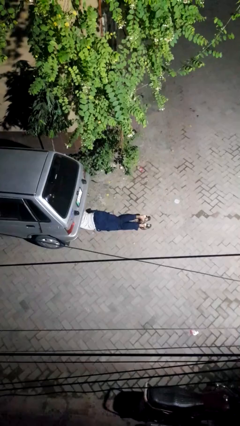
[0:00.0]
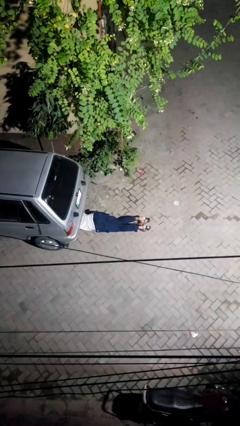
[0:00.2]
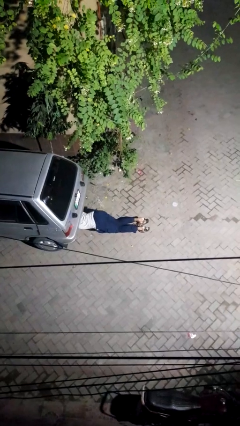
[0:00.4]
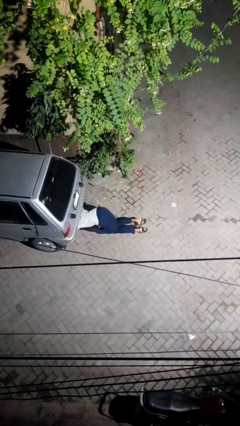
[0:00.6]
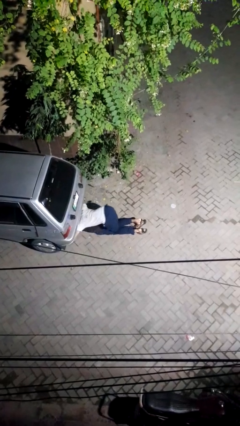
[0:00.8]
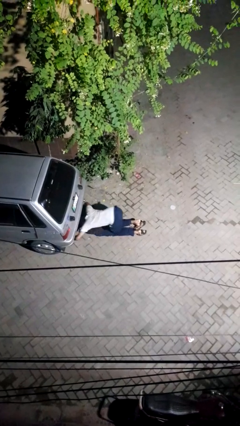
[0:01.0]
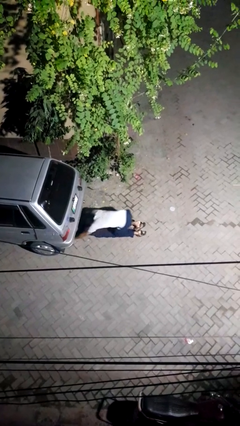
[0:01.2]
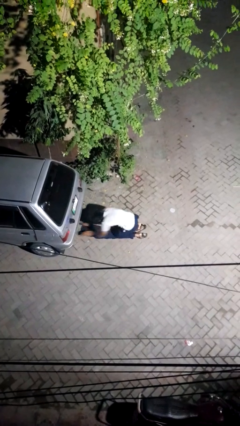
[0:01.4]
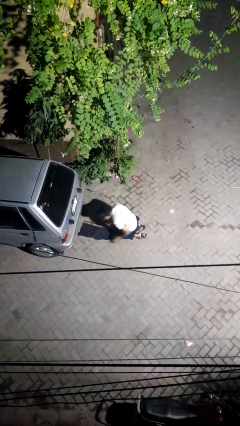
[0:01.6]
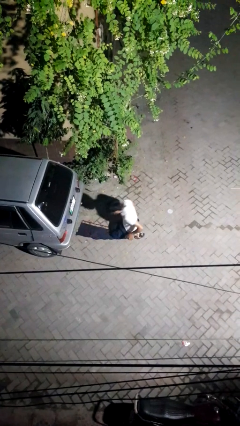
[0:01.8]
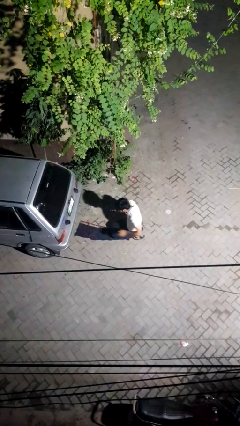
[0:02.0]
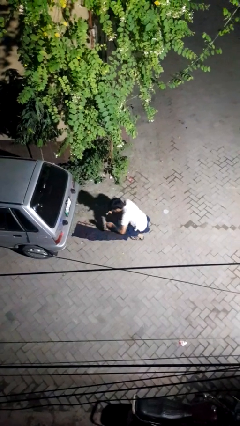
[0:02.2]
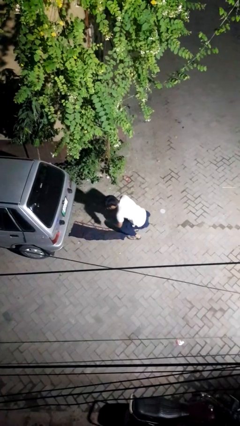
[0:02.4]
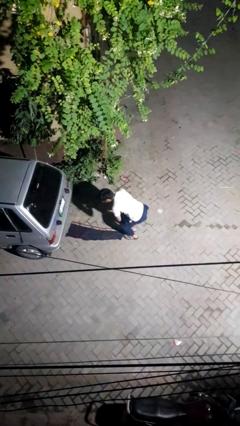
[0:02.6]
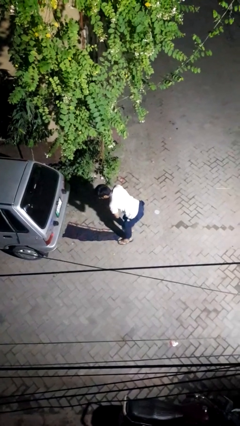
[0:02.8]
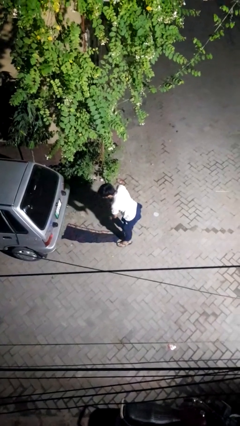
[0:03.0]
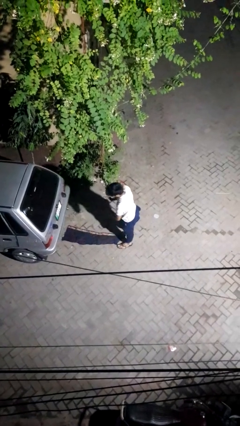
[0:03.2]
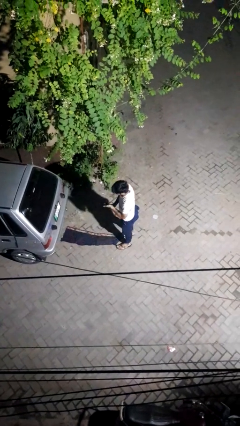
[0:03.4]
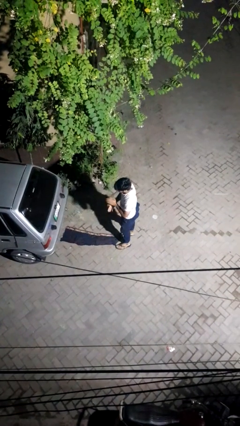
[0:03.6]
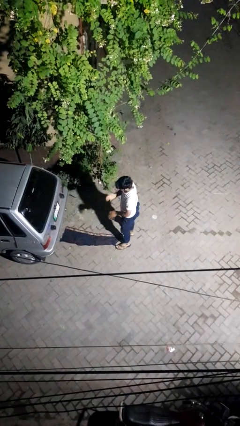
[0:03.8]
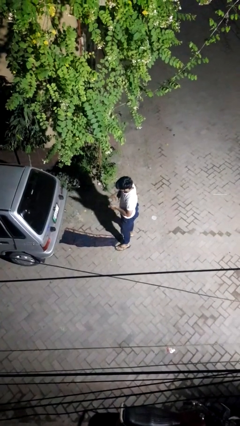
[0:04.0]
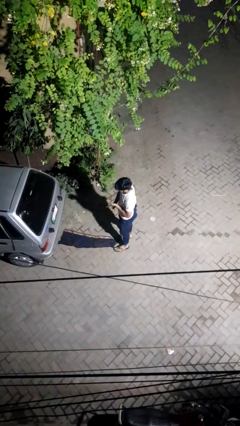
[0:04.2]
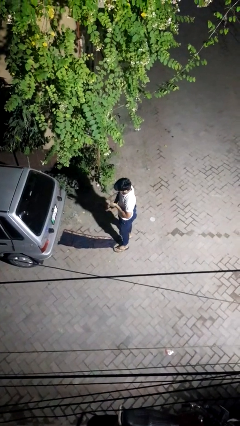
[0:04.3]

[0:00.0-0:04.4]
person crawls out from under vehicle

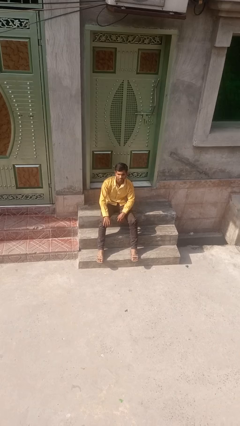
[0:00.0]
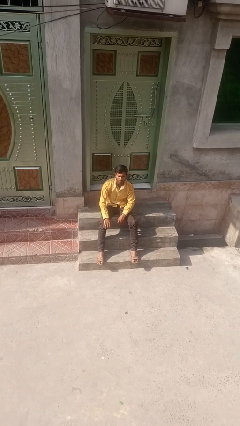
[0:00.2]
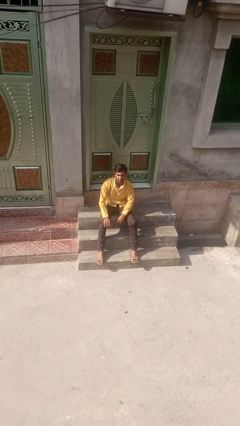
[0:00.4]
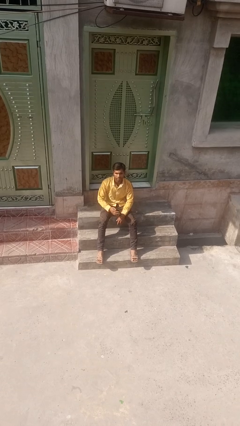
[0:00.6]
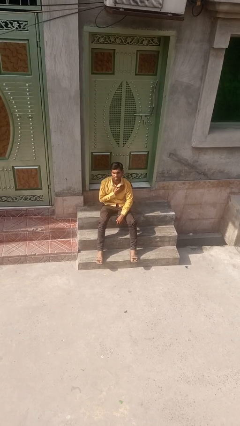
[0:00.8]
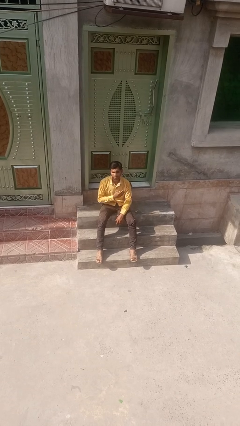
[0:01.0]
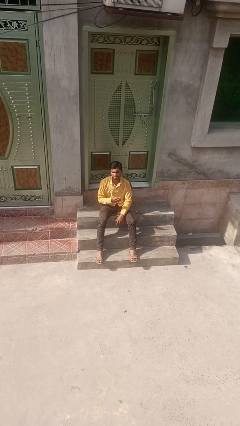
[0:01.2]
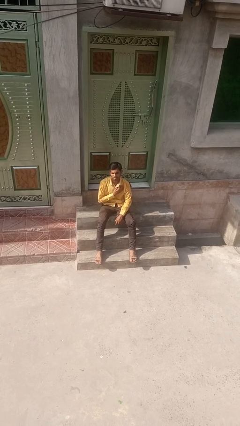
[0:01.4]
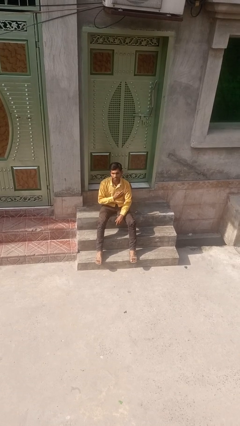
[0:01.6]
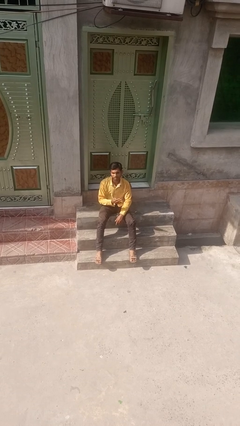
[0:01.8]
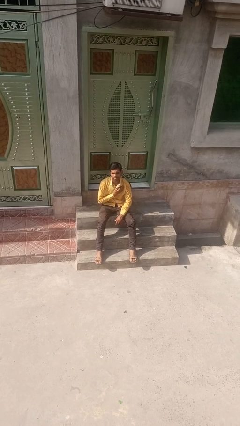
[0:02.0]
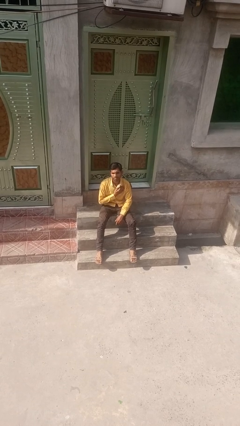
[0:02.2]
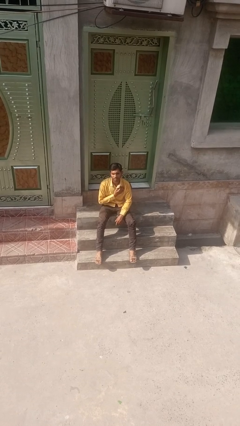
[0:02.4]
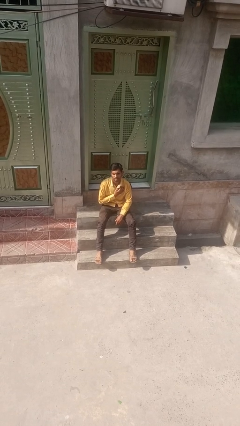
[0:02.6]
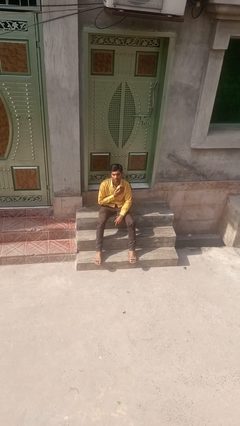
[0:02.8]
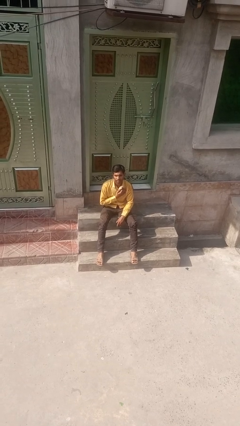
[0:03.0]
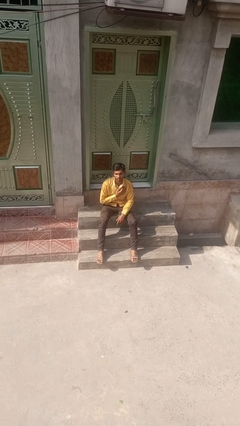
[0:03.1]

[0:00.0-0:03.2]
person drums on chest

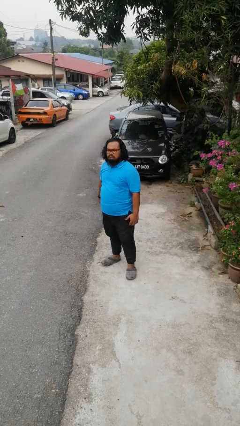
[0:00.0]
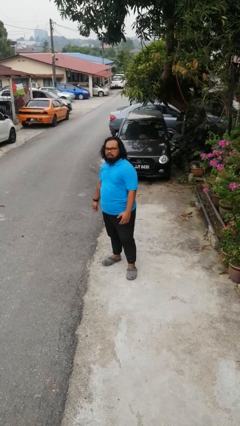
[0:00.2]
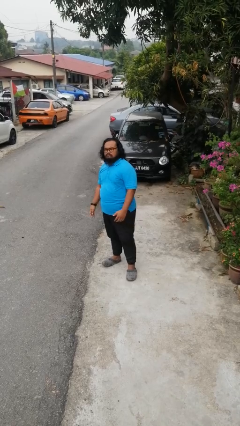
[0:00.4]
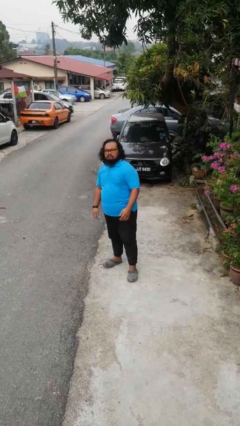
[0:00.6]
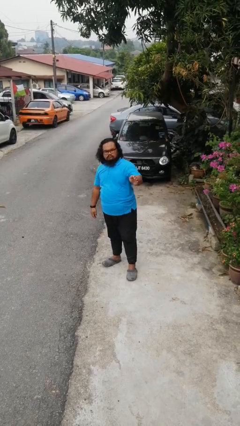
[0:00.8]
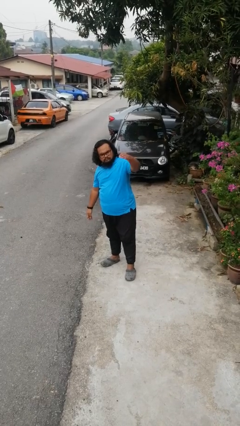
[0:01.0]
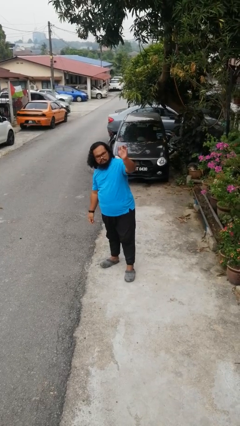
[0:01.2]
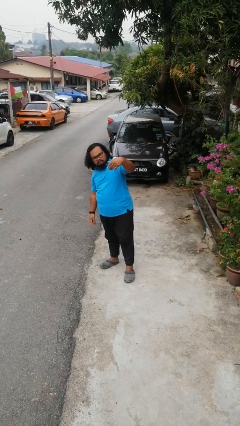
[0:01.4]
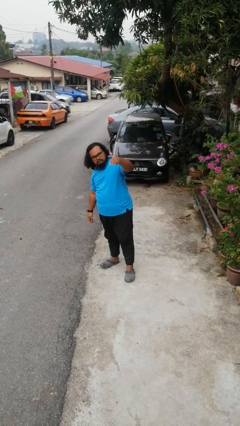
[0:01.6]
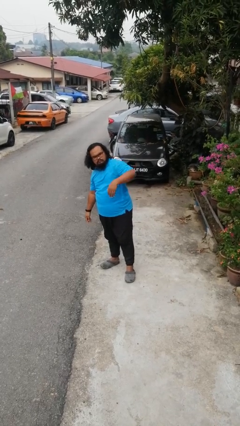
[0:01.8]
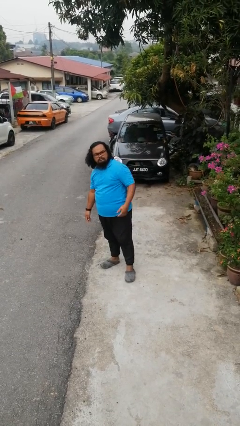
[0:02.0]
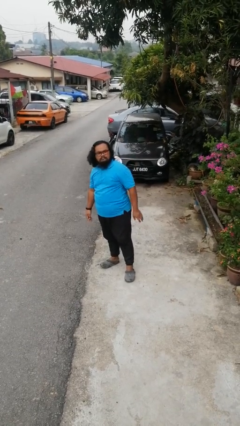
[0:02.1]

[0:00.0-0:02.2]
person gestures come here

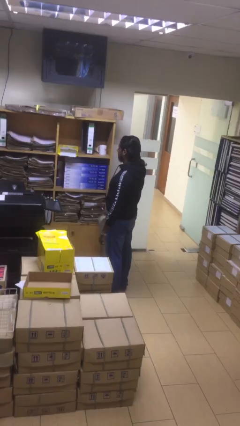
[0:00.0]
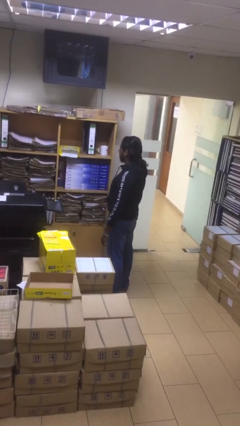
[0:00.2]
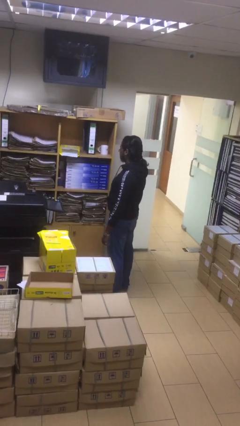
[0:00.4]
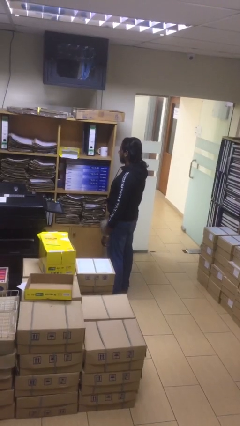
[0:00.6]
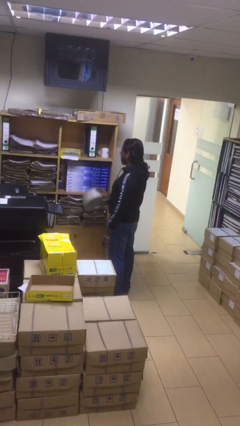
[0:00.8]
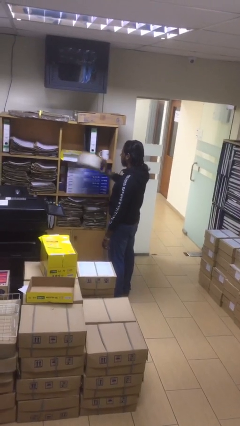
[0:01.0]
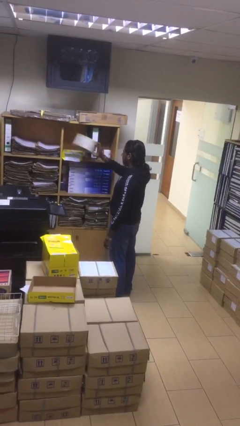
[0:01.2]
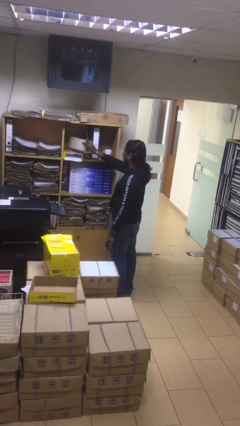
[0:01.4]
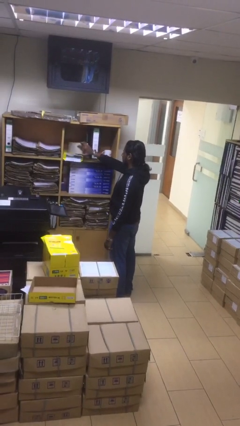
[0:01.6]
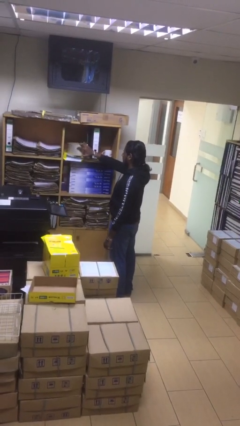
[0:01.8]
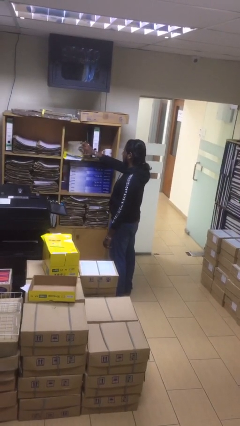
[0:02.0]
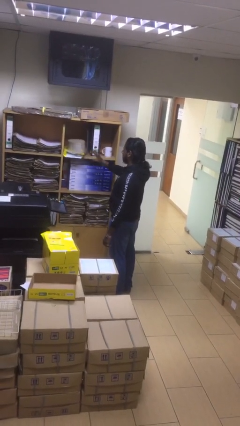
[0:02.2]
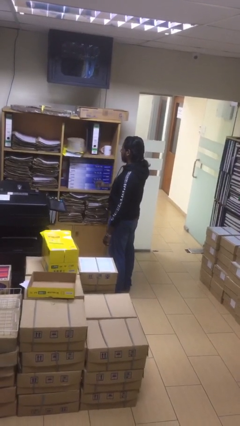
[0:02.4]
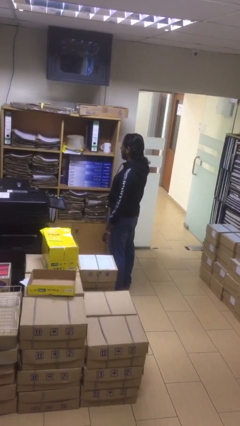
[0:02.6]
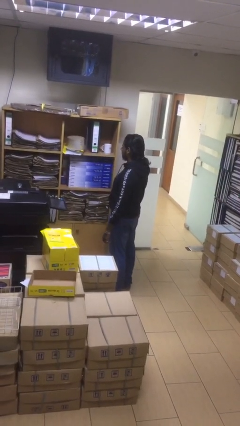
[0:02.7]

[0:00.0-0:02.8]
person puts down object into cabinet

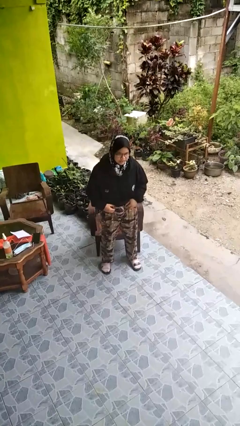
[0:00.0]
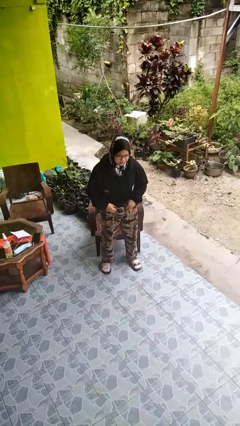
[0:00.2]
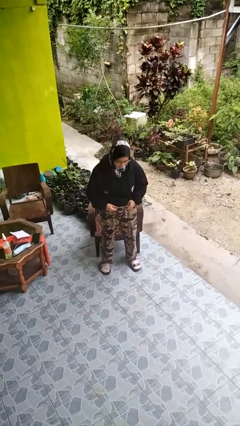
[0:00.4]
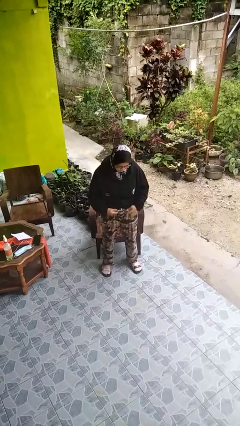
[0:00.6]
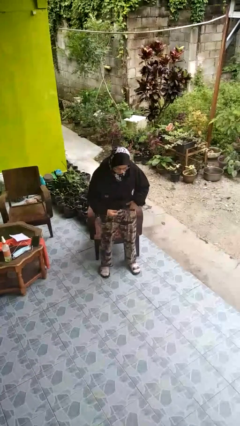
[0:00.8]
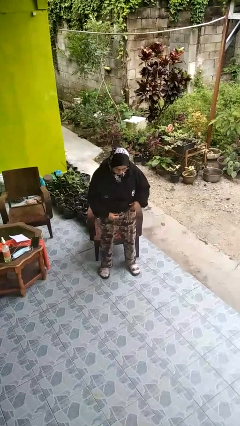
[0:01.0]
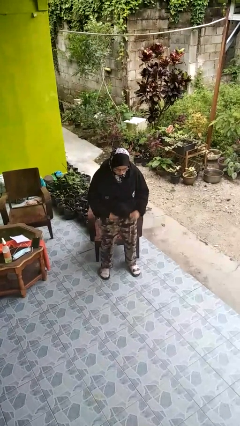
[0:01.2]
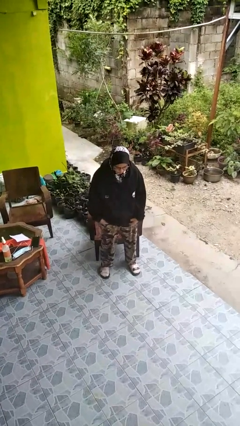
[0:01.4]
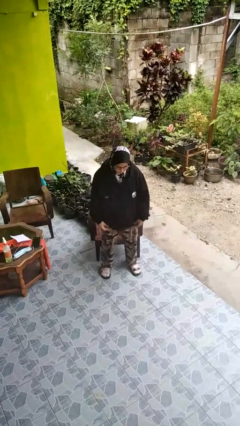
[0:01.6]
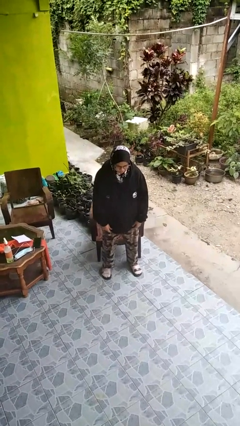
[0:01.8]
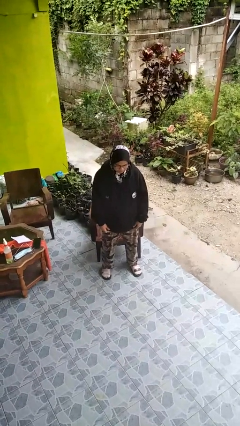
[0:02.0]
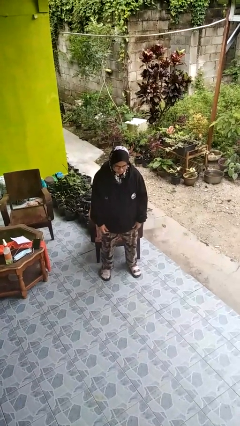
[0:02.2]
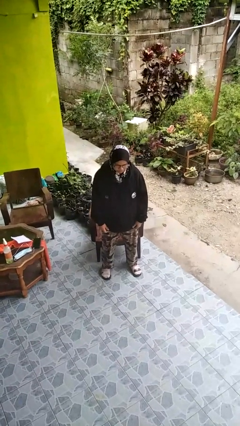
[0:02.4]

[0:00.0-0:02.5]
person untucks shirt

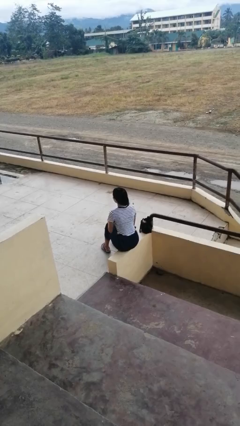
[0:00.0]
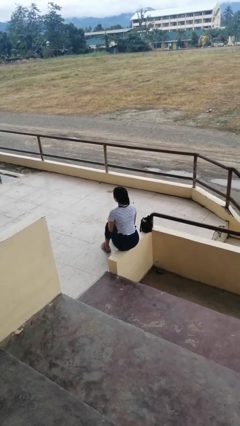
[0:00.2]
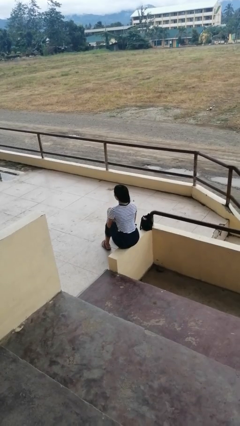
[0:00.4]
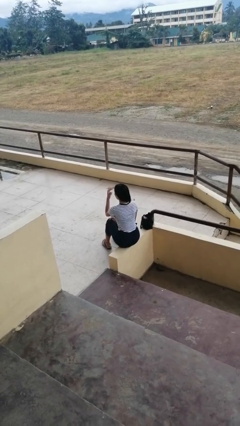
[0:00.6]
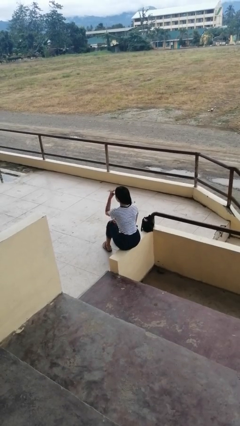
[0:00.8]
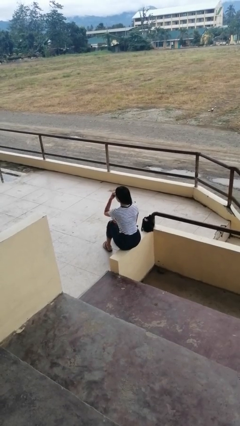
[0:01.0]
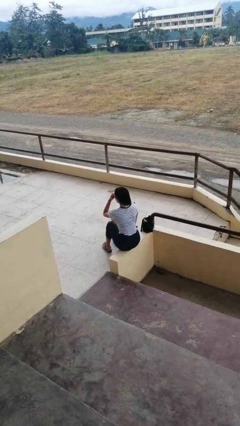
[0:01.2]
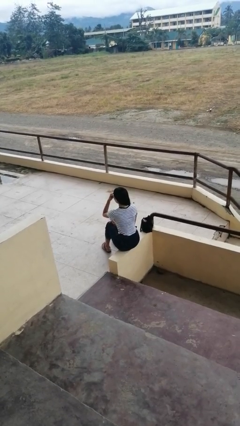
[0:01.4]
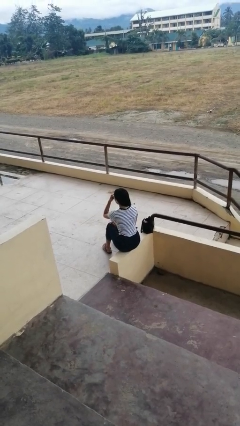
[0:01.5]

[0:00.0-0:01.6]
person gestures watch closely

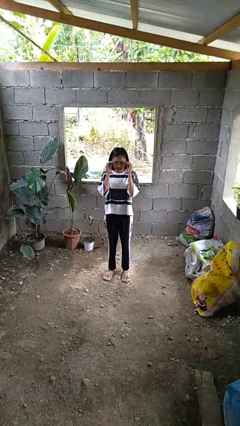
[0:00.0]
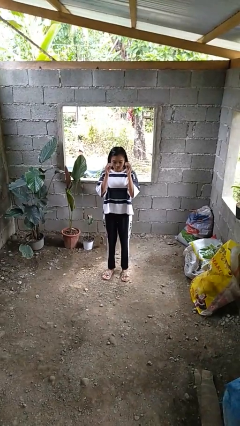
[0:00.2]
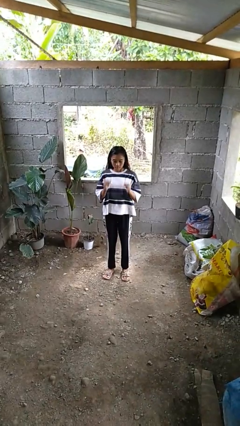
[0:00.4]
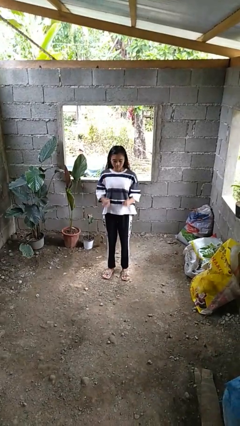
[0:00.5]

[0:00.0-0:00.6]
person takes off glasses

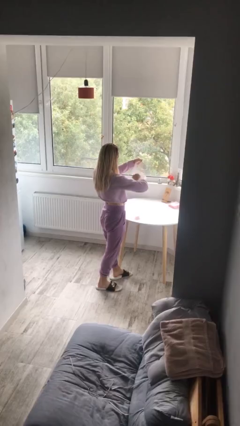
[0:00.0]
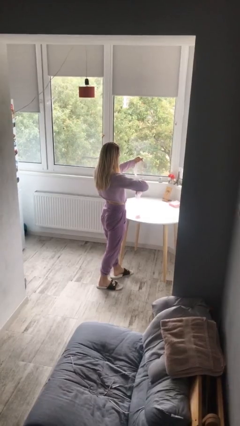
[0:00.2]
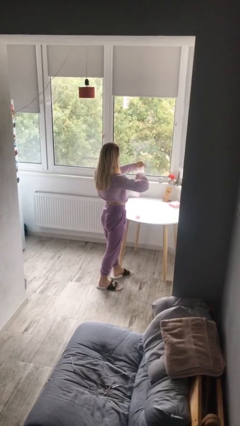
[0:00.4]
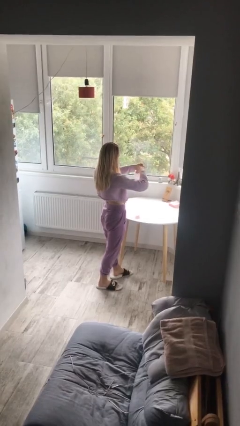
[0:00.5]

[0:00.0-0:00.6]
person tears paper
